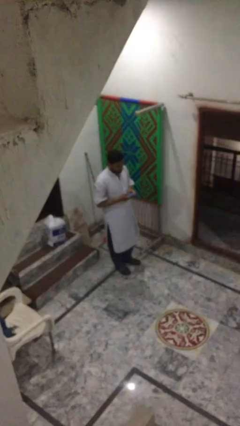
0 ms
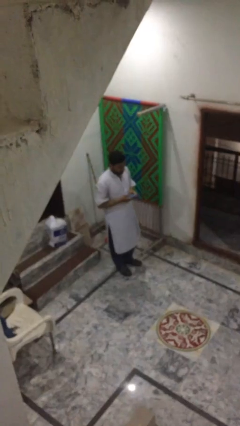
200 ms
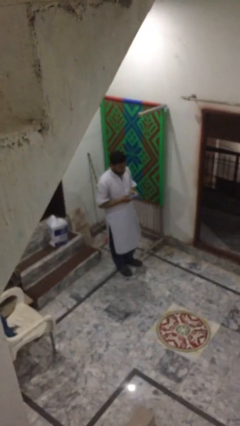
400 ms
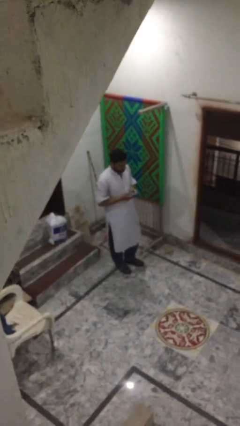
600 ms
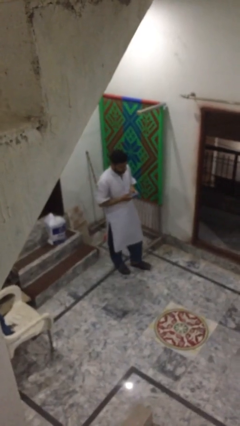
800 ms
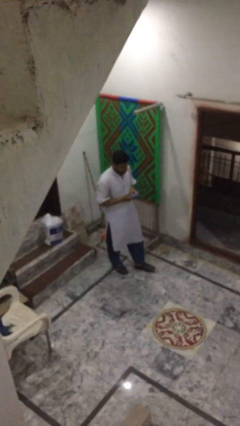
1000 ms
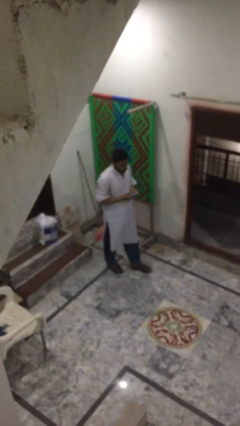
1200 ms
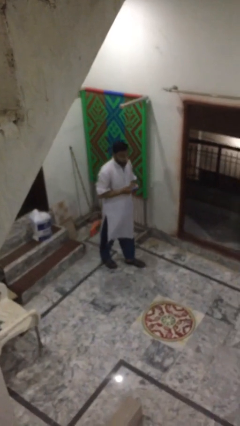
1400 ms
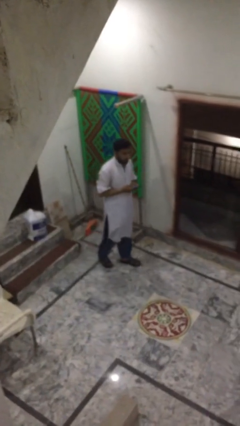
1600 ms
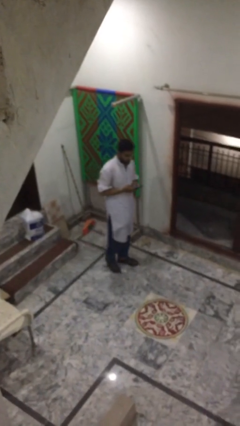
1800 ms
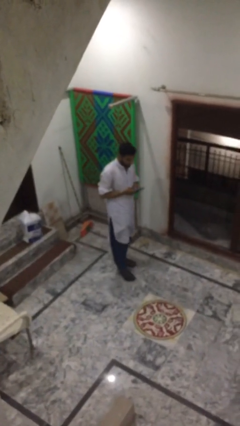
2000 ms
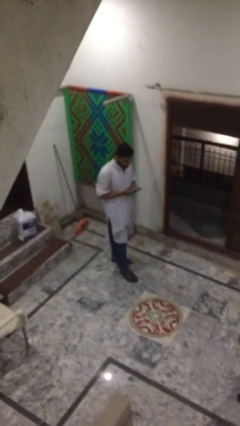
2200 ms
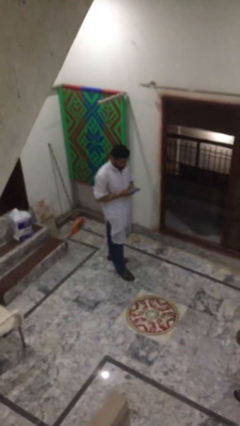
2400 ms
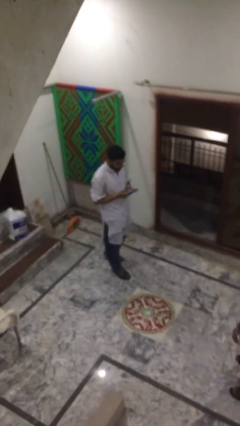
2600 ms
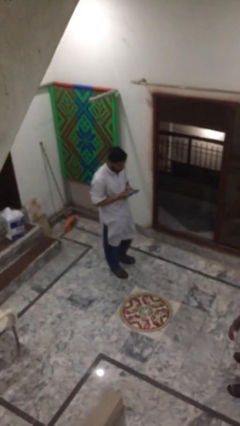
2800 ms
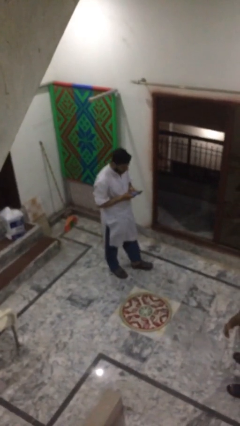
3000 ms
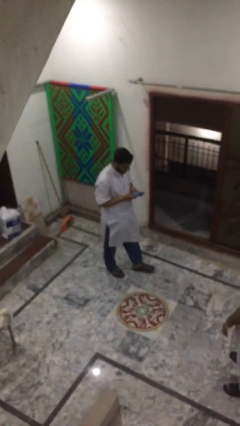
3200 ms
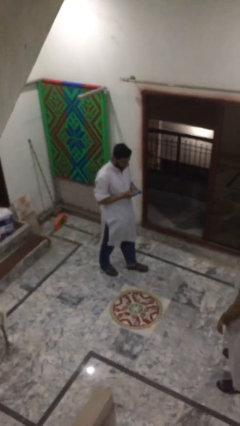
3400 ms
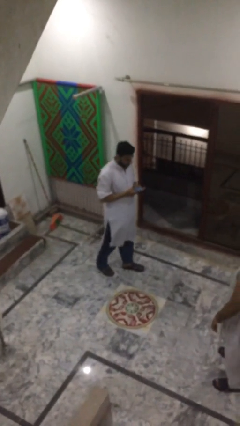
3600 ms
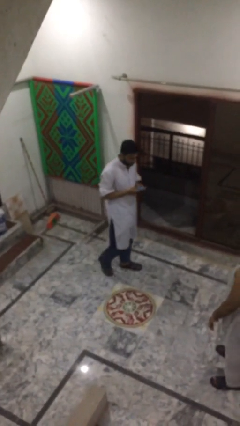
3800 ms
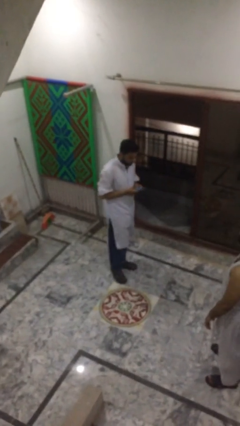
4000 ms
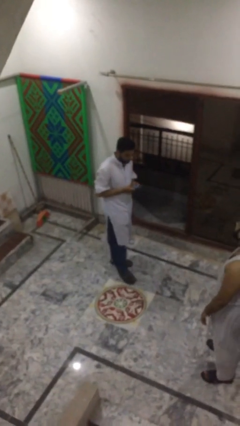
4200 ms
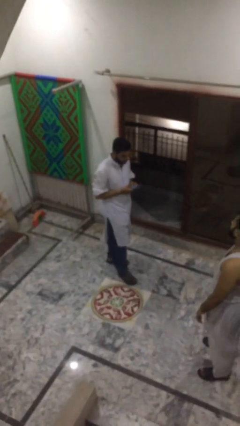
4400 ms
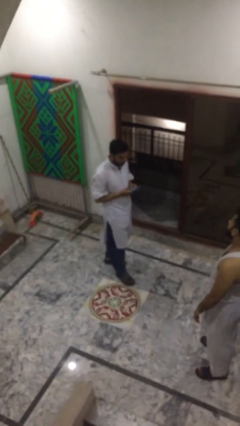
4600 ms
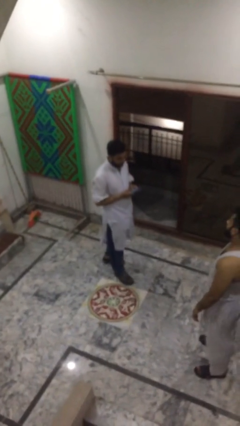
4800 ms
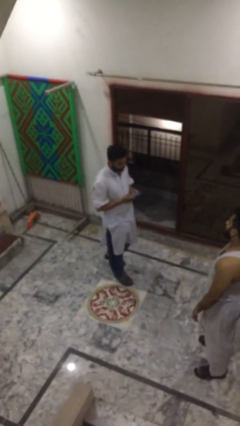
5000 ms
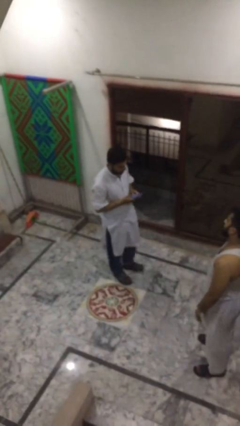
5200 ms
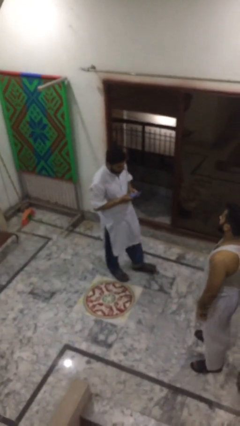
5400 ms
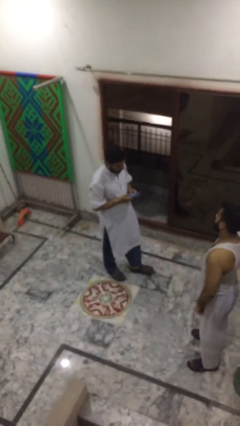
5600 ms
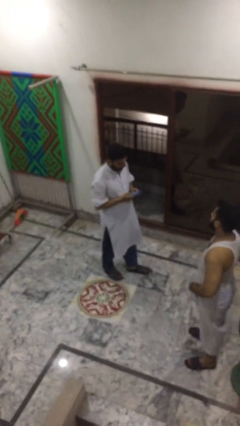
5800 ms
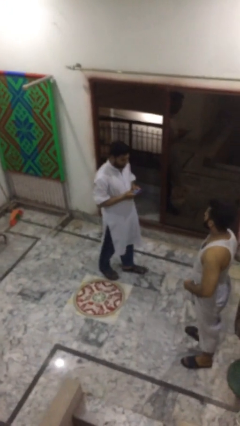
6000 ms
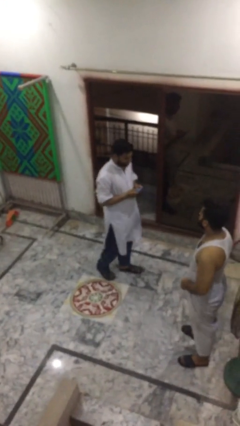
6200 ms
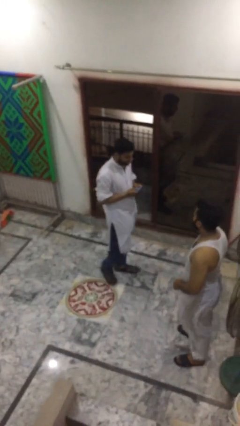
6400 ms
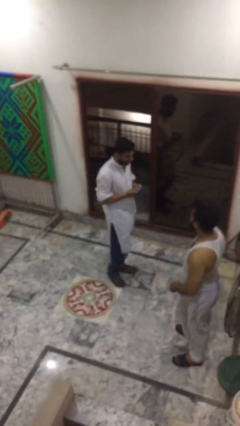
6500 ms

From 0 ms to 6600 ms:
person texts on phone

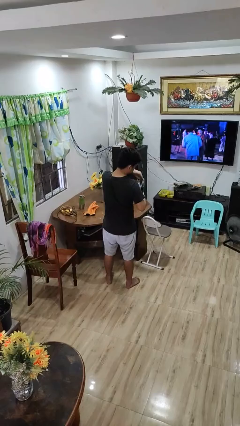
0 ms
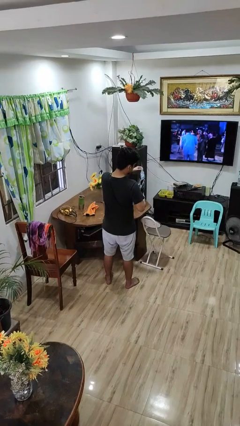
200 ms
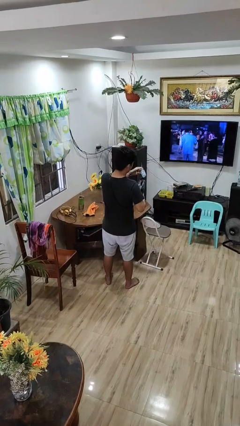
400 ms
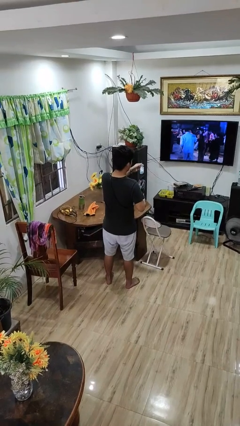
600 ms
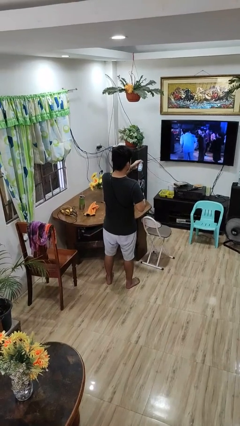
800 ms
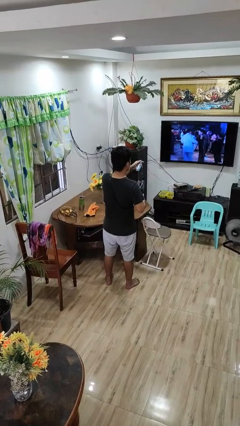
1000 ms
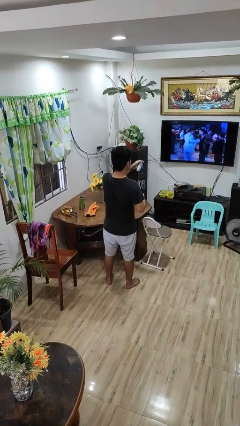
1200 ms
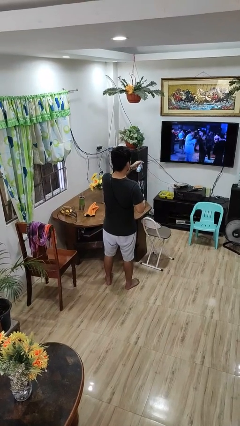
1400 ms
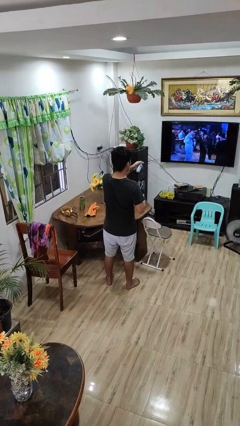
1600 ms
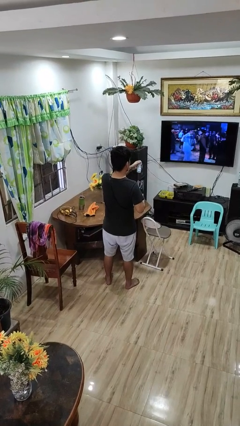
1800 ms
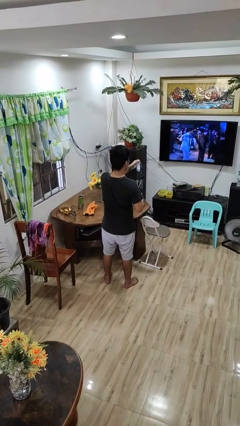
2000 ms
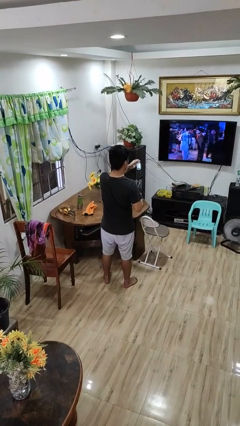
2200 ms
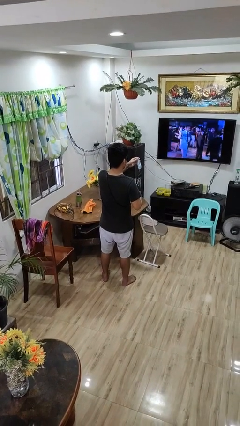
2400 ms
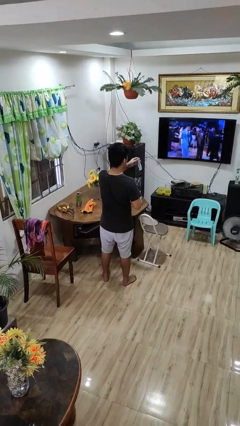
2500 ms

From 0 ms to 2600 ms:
person takes object from purse

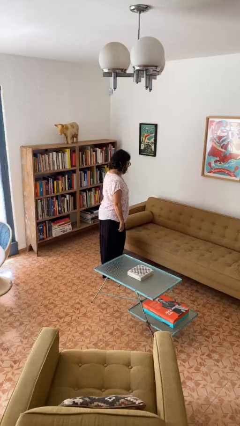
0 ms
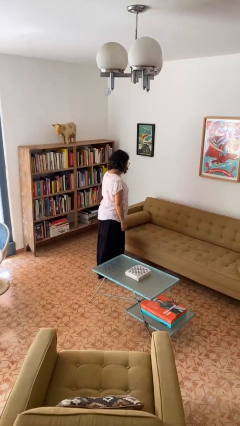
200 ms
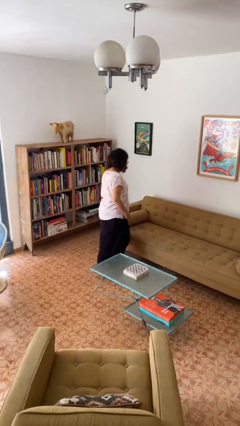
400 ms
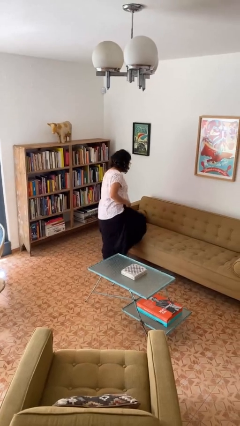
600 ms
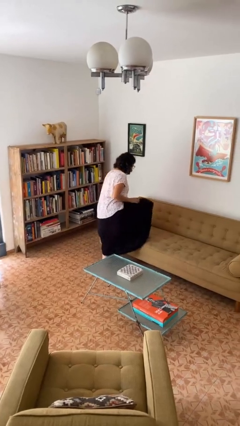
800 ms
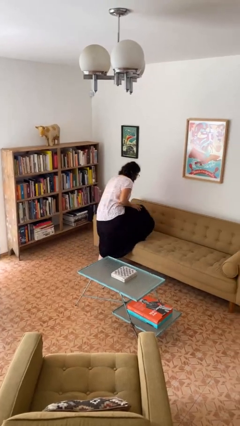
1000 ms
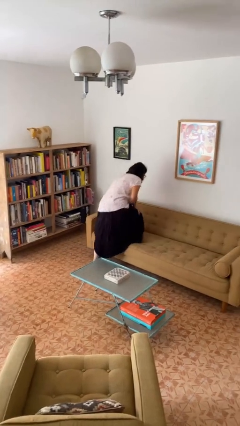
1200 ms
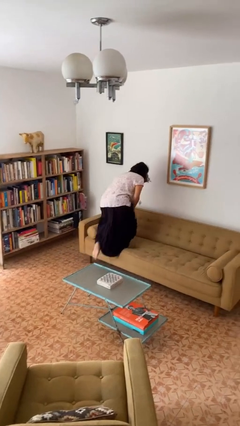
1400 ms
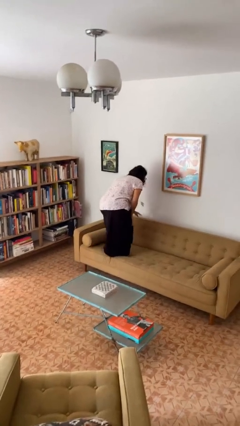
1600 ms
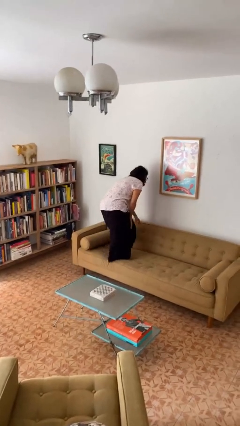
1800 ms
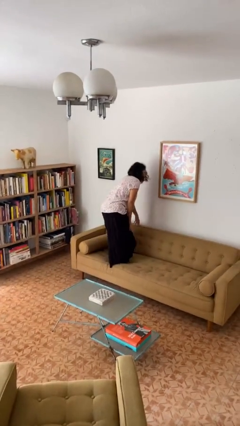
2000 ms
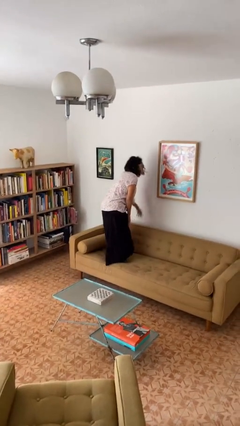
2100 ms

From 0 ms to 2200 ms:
person climbs on couch

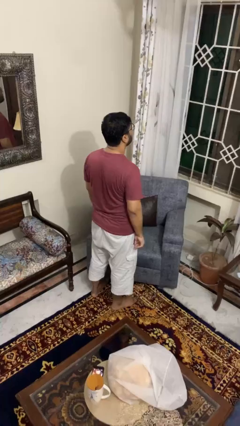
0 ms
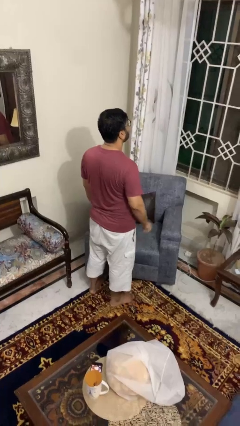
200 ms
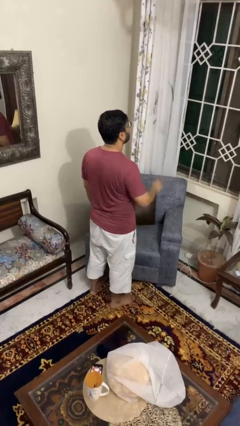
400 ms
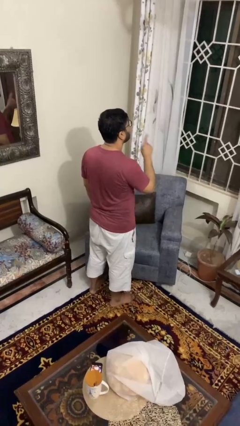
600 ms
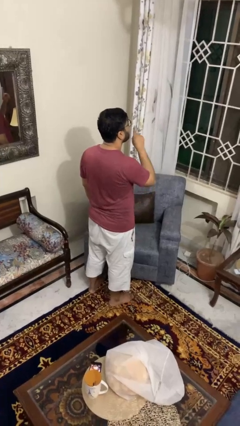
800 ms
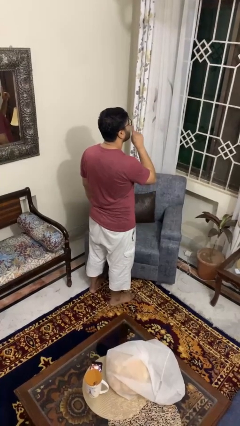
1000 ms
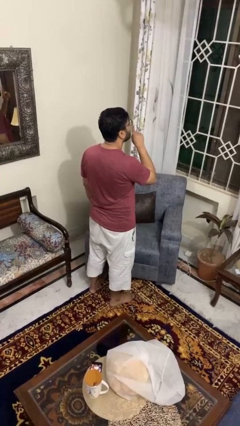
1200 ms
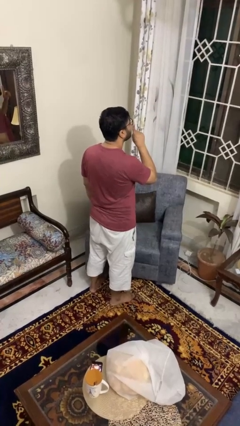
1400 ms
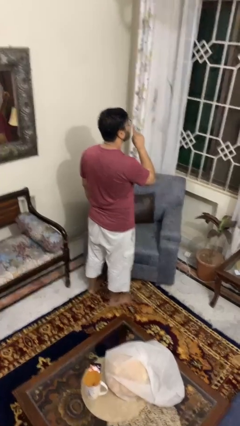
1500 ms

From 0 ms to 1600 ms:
person gestures be quiet

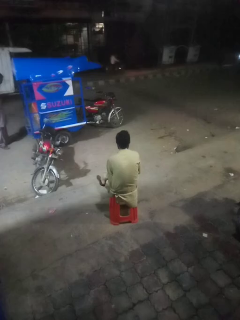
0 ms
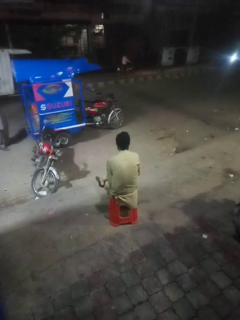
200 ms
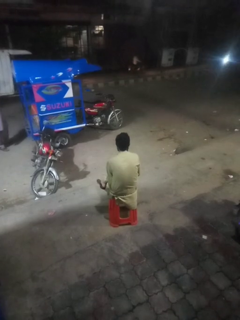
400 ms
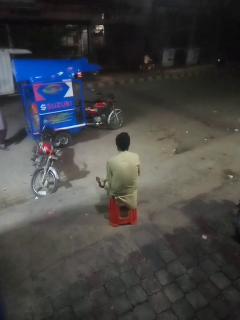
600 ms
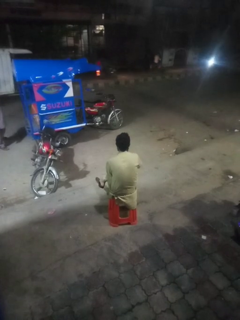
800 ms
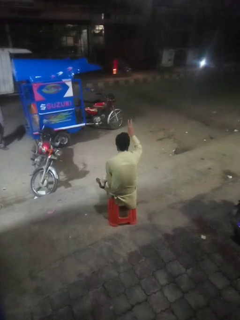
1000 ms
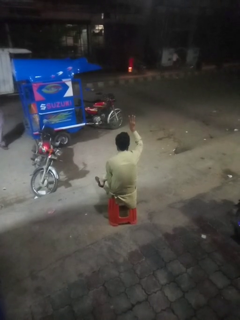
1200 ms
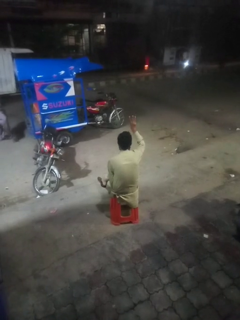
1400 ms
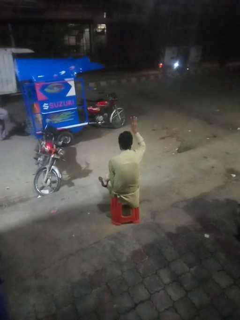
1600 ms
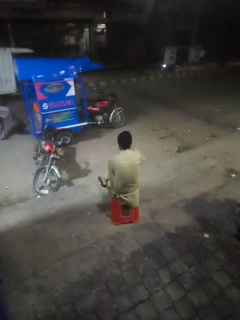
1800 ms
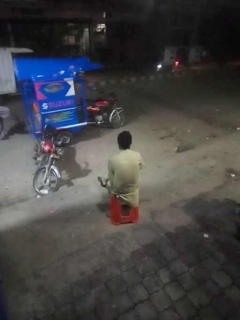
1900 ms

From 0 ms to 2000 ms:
person gestures number three

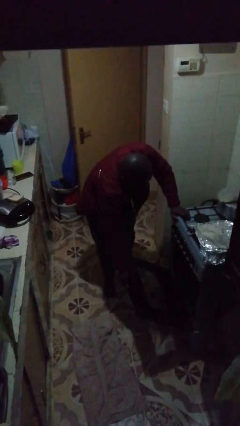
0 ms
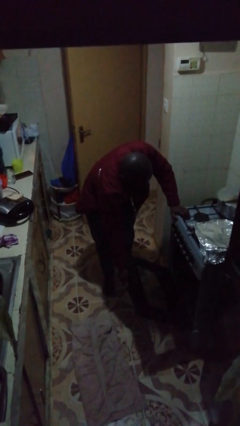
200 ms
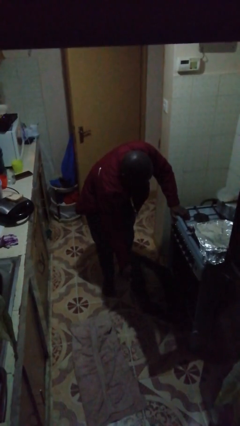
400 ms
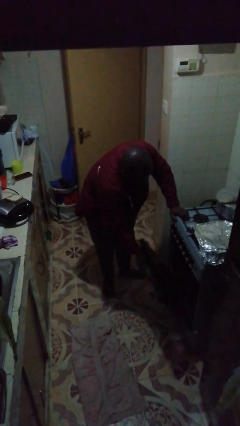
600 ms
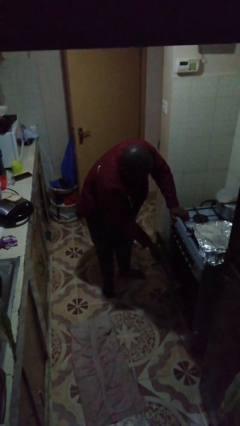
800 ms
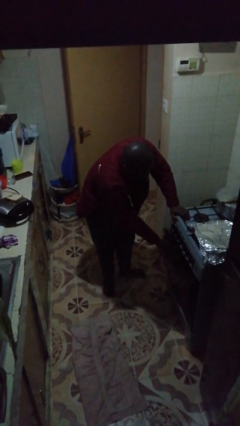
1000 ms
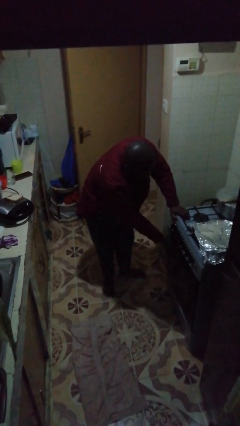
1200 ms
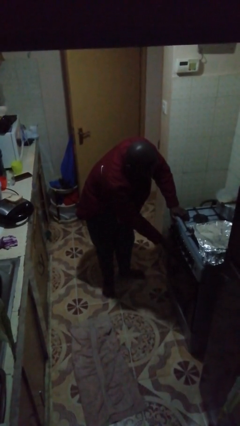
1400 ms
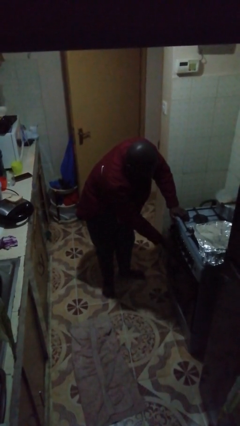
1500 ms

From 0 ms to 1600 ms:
person closes oven door

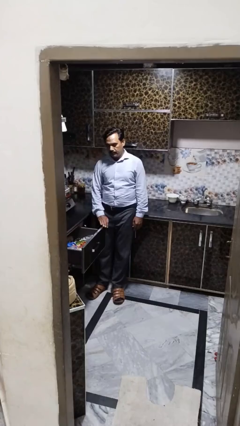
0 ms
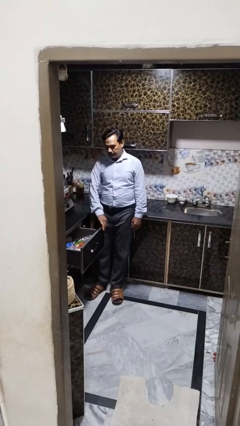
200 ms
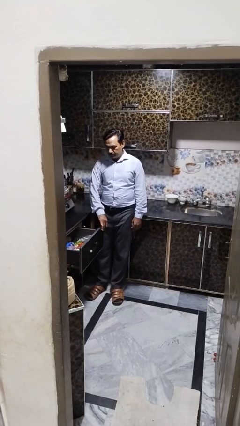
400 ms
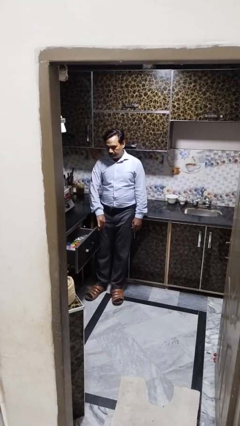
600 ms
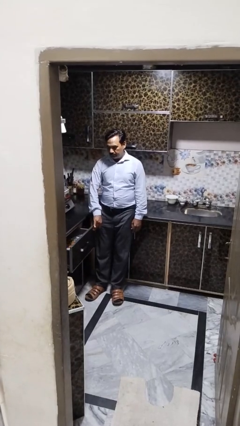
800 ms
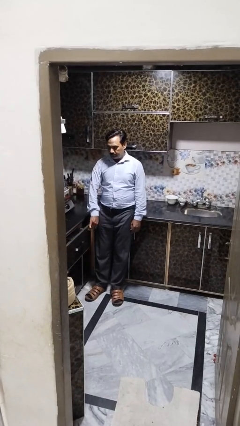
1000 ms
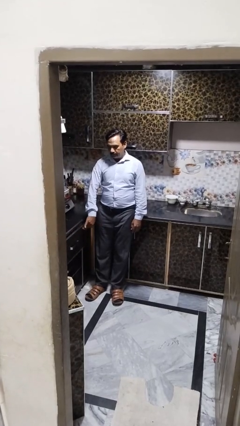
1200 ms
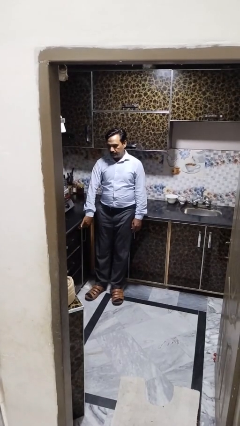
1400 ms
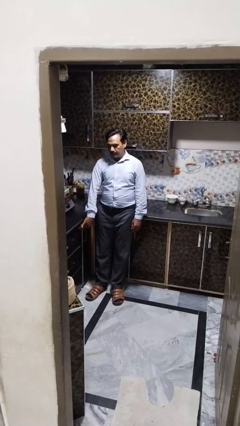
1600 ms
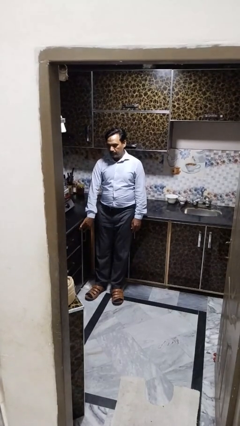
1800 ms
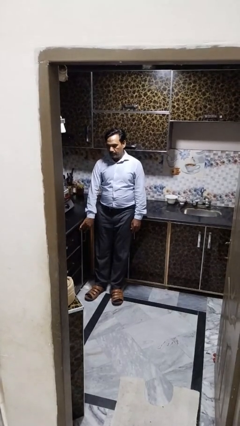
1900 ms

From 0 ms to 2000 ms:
person closes kitchen drawer
